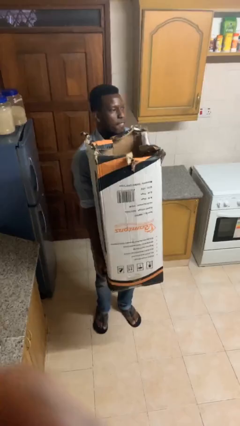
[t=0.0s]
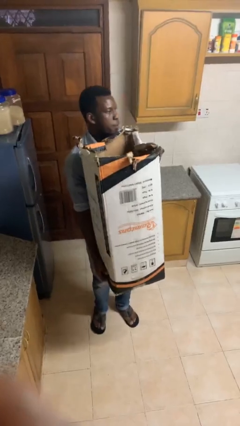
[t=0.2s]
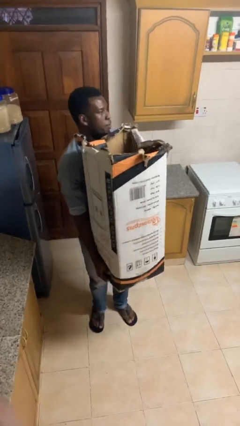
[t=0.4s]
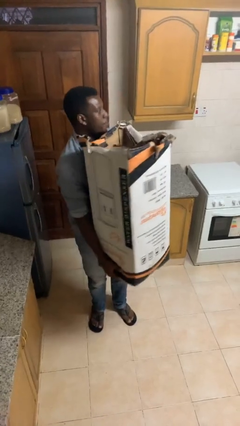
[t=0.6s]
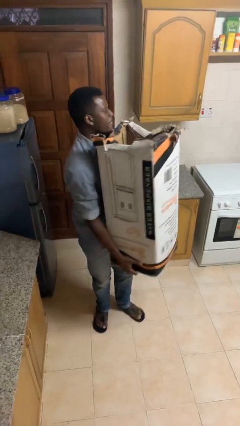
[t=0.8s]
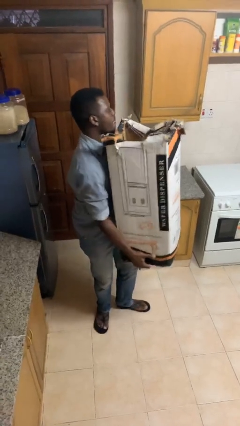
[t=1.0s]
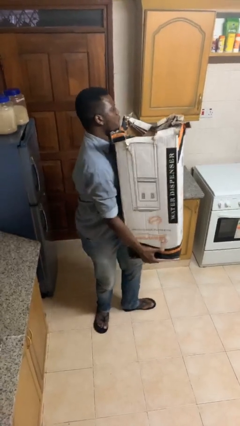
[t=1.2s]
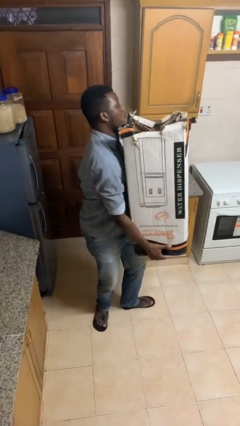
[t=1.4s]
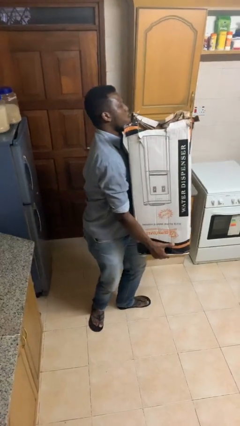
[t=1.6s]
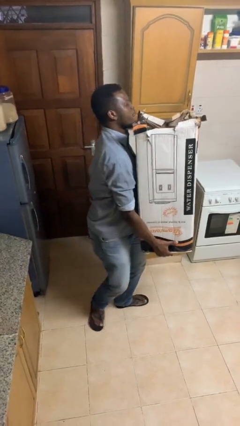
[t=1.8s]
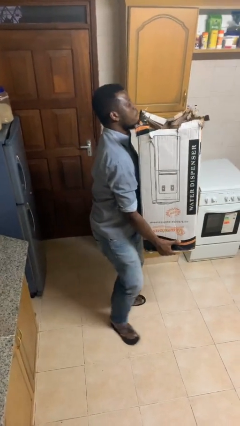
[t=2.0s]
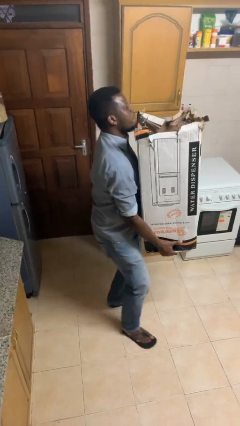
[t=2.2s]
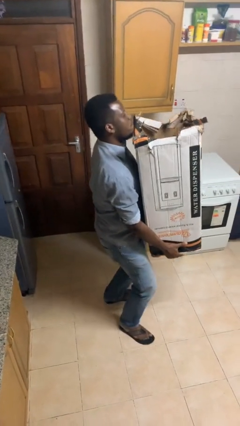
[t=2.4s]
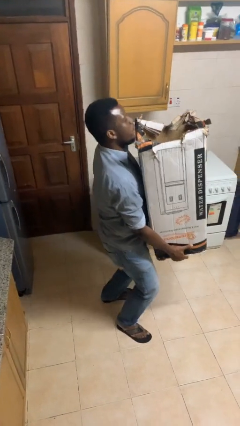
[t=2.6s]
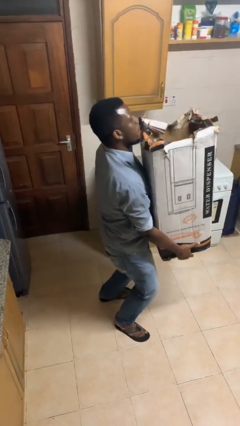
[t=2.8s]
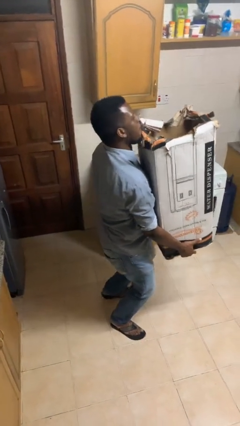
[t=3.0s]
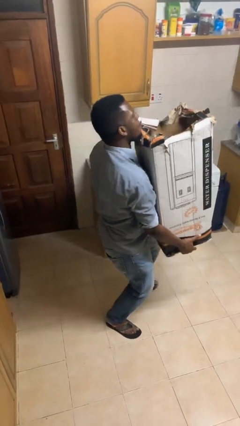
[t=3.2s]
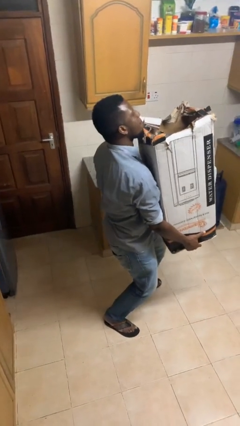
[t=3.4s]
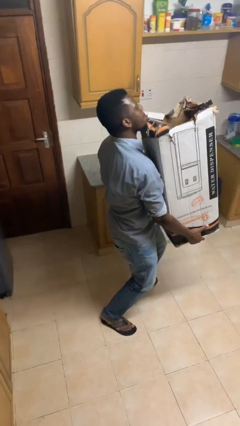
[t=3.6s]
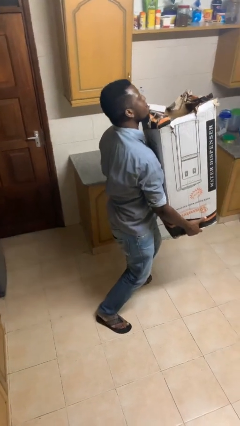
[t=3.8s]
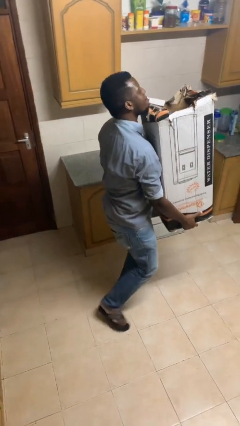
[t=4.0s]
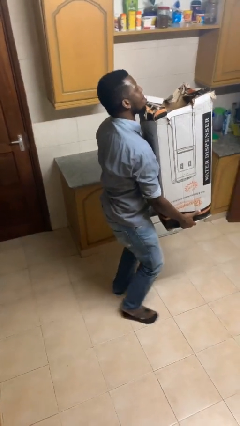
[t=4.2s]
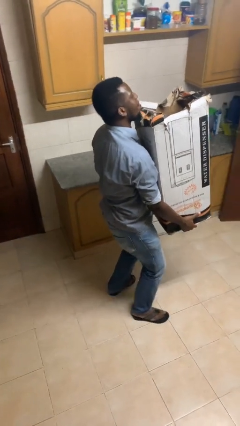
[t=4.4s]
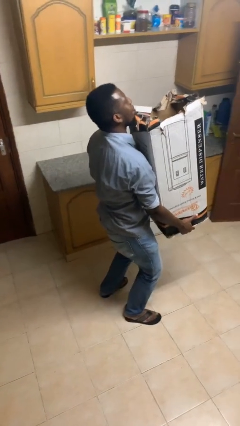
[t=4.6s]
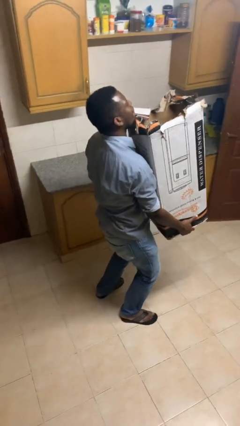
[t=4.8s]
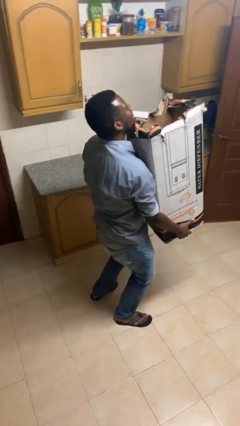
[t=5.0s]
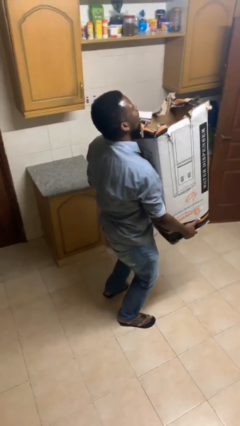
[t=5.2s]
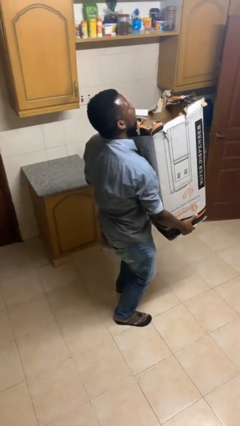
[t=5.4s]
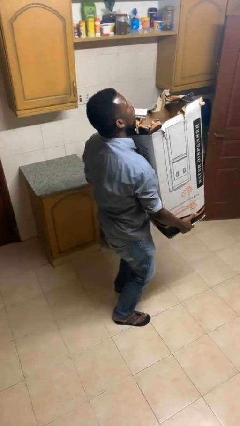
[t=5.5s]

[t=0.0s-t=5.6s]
person carries heavy object

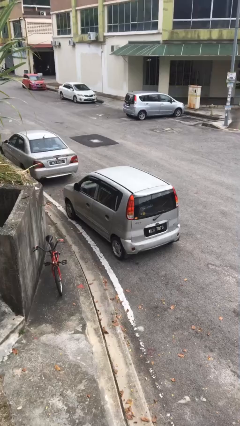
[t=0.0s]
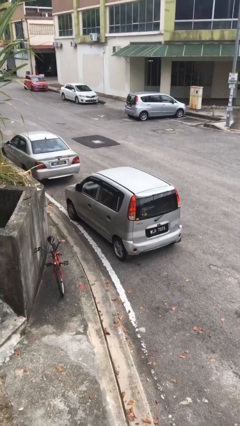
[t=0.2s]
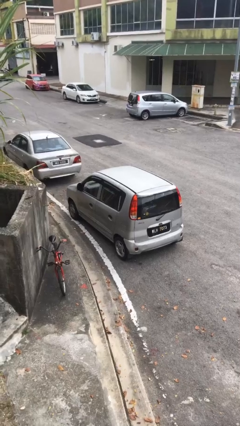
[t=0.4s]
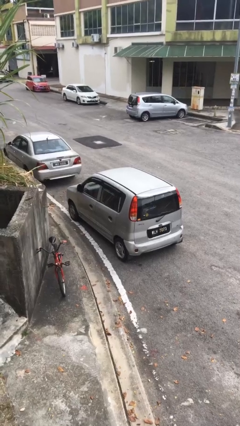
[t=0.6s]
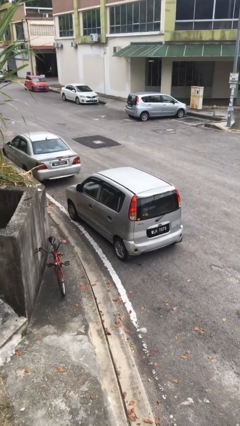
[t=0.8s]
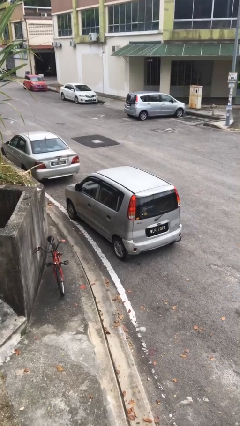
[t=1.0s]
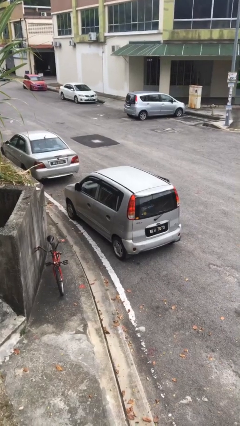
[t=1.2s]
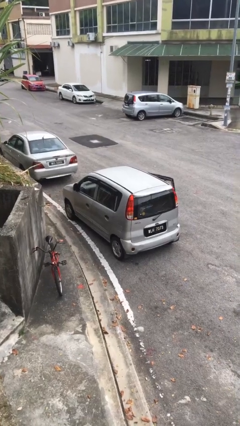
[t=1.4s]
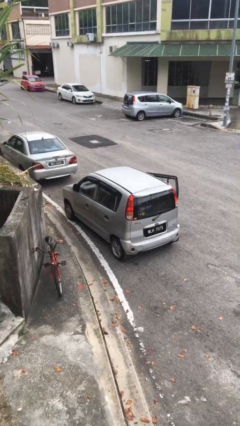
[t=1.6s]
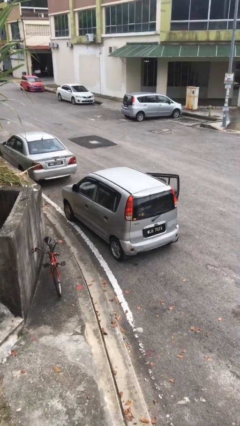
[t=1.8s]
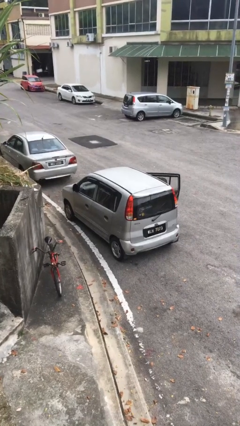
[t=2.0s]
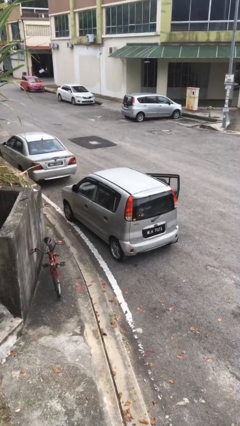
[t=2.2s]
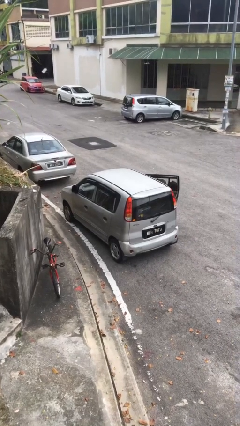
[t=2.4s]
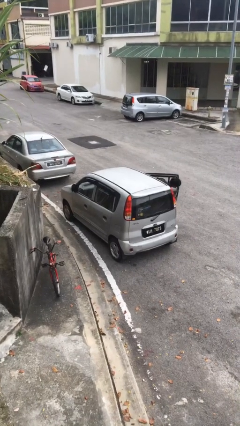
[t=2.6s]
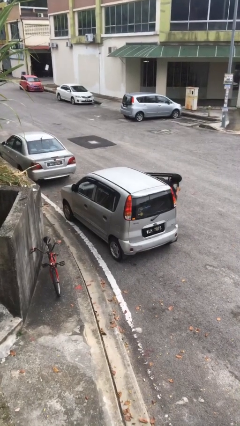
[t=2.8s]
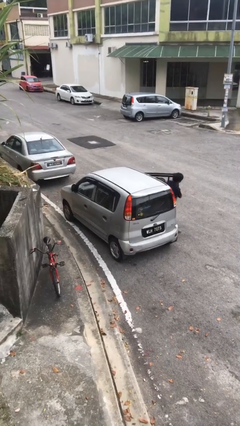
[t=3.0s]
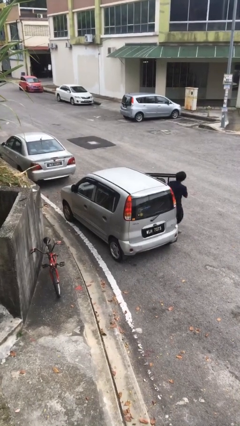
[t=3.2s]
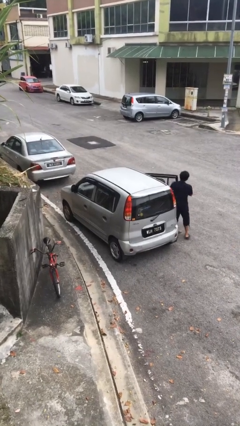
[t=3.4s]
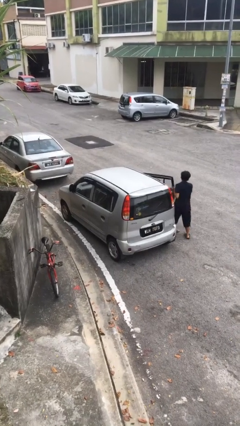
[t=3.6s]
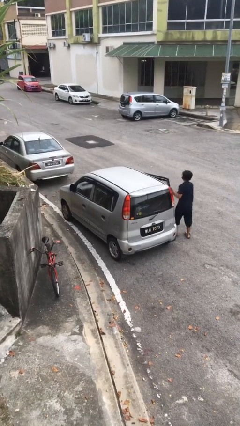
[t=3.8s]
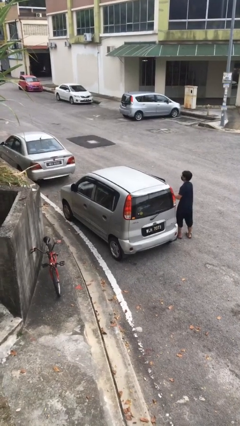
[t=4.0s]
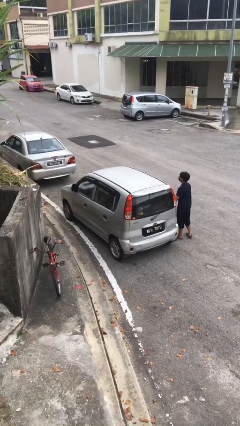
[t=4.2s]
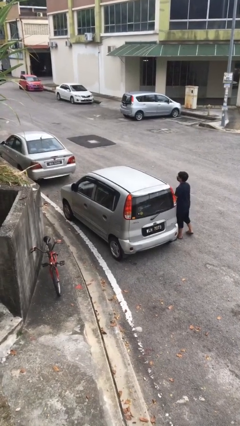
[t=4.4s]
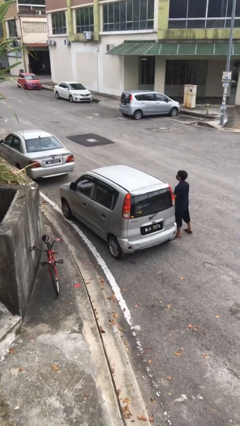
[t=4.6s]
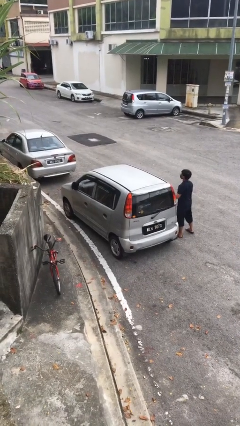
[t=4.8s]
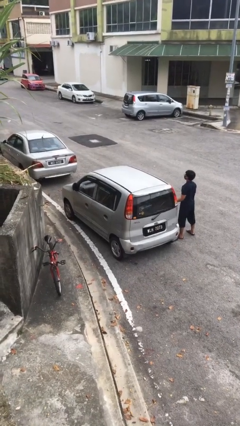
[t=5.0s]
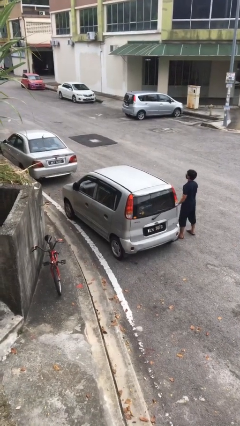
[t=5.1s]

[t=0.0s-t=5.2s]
car drops off person

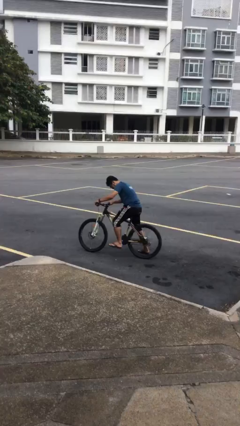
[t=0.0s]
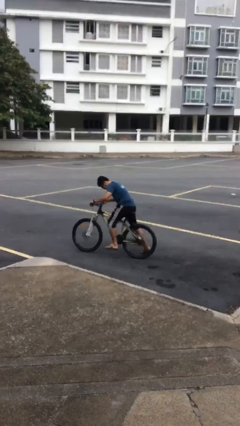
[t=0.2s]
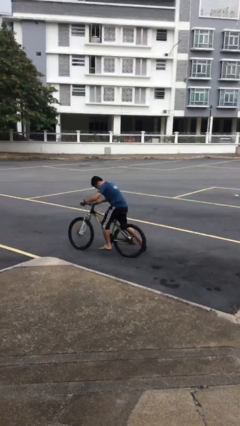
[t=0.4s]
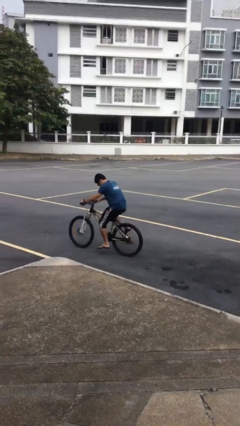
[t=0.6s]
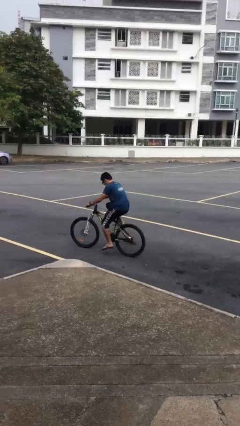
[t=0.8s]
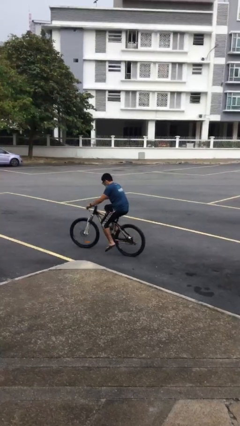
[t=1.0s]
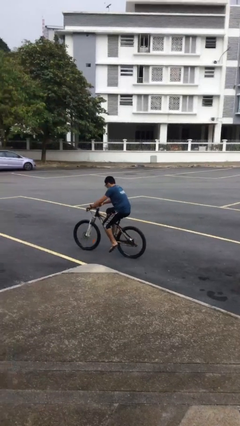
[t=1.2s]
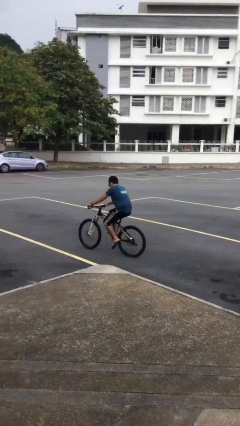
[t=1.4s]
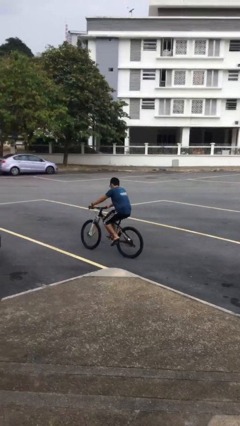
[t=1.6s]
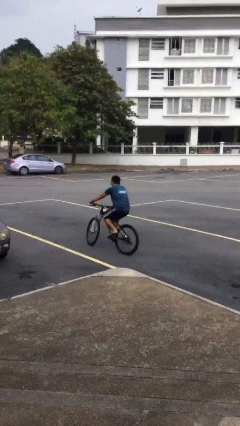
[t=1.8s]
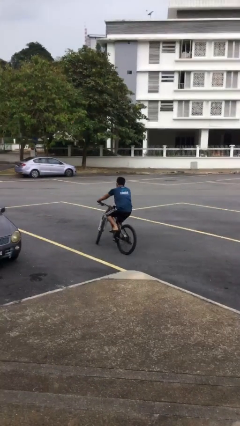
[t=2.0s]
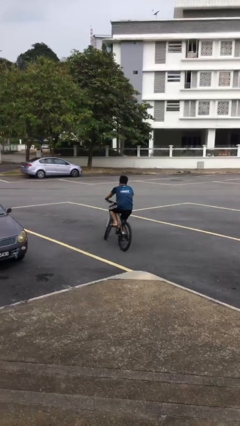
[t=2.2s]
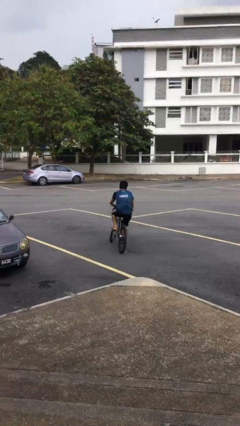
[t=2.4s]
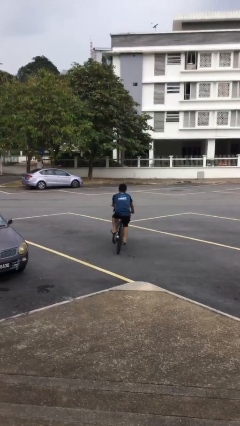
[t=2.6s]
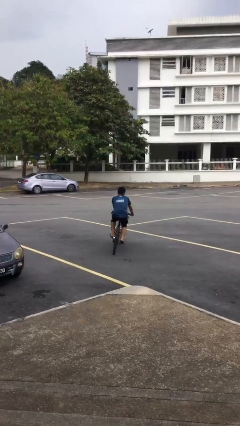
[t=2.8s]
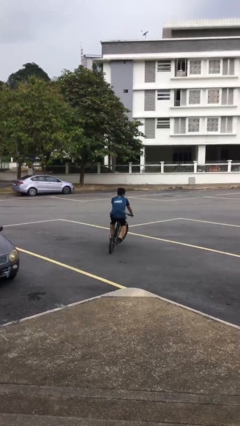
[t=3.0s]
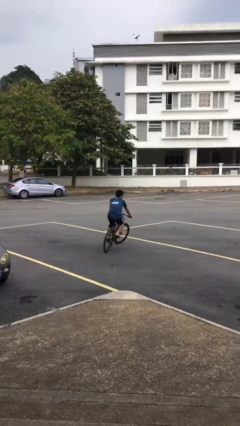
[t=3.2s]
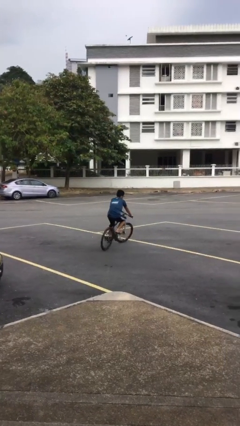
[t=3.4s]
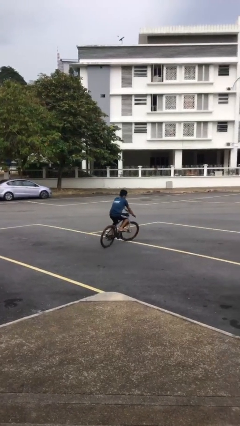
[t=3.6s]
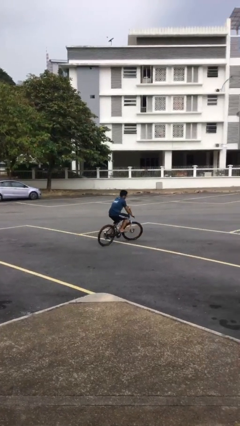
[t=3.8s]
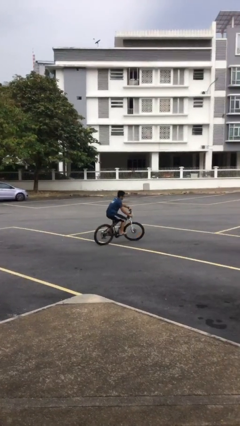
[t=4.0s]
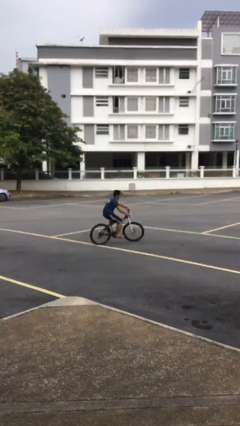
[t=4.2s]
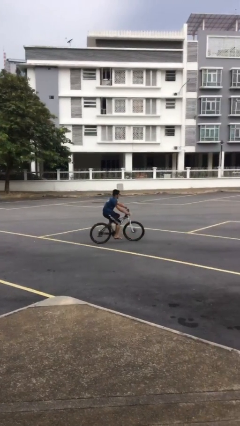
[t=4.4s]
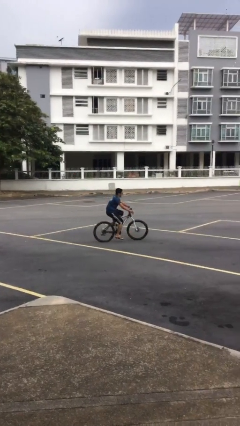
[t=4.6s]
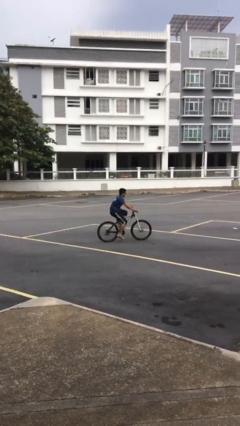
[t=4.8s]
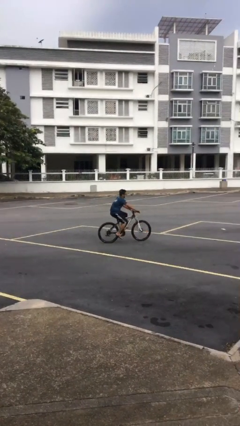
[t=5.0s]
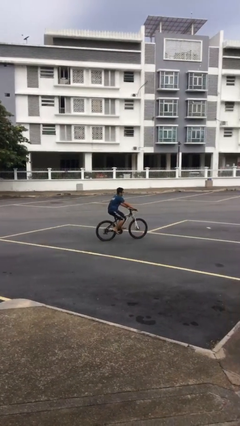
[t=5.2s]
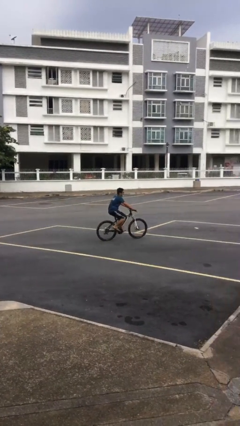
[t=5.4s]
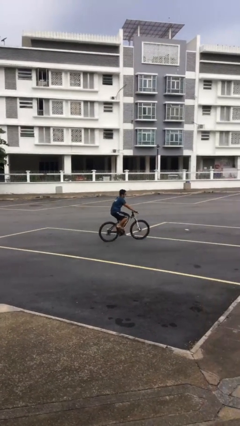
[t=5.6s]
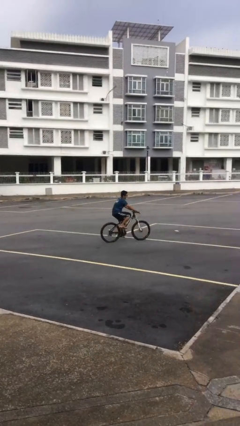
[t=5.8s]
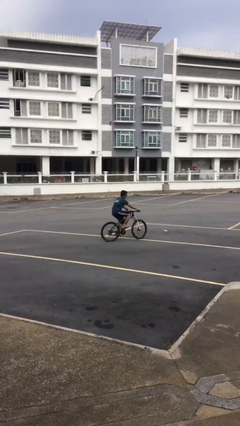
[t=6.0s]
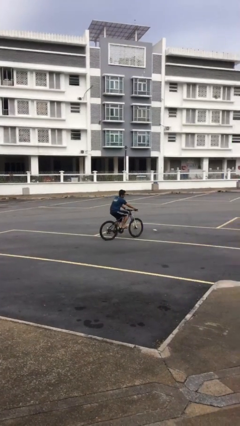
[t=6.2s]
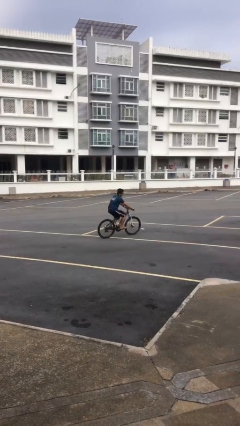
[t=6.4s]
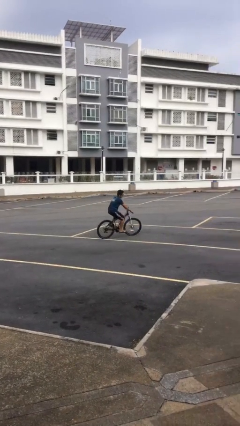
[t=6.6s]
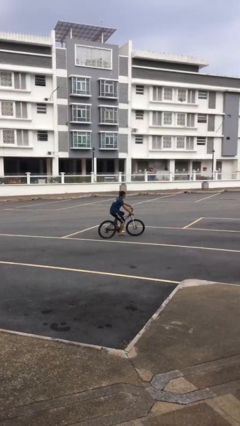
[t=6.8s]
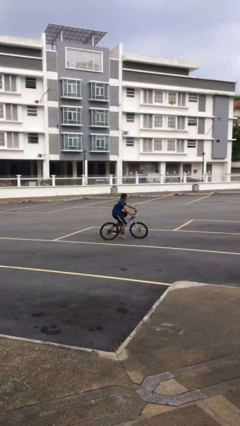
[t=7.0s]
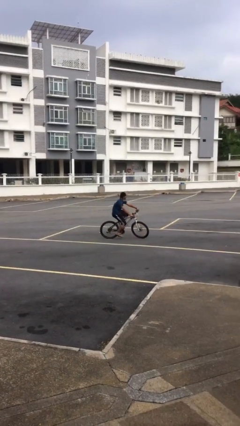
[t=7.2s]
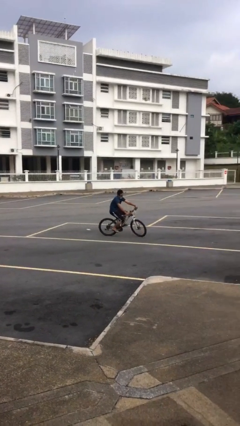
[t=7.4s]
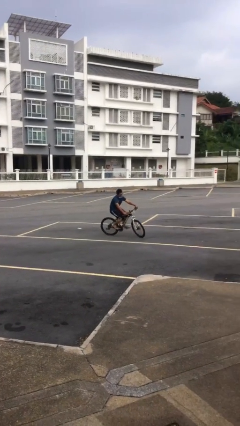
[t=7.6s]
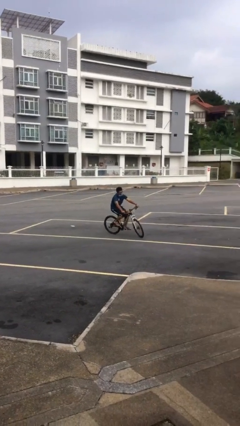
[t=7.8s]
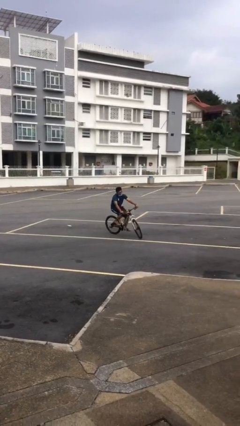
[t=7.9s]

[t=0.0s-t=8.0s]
person rides bicycle
